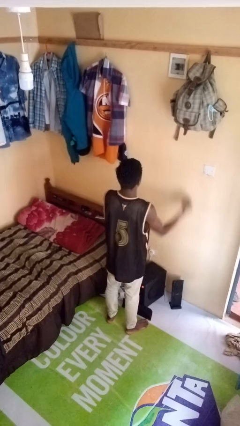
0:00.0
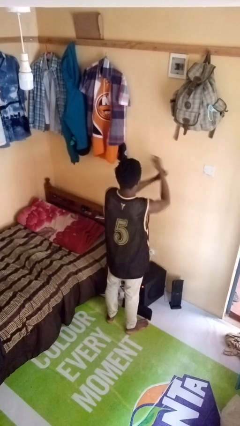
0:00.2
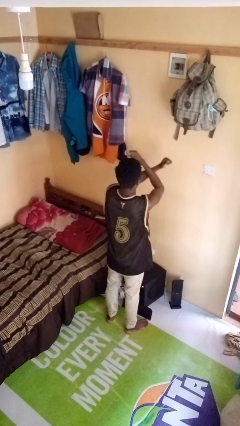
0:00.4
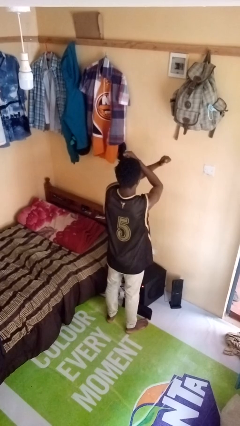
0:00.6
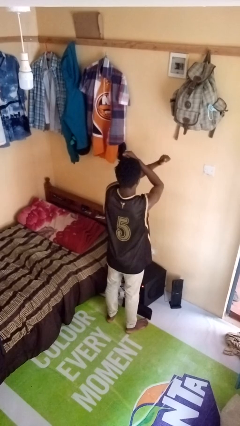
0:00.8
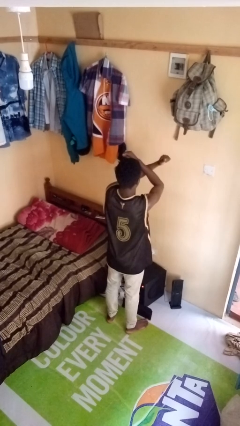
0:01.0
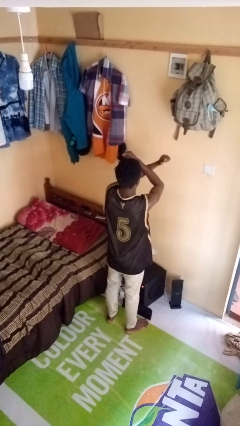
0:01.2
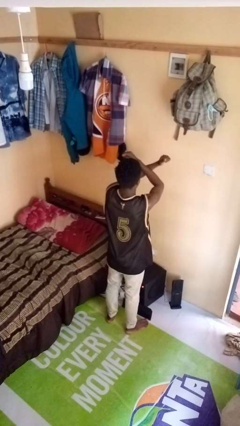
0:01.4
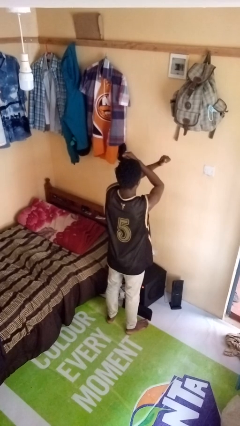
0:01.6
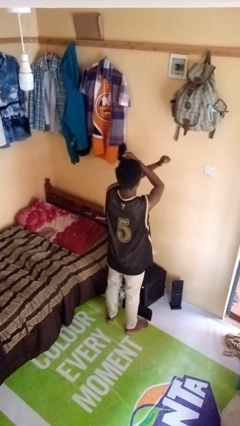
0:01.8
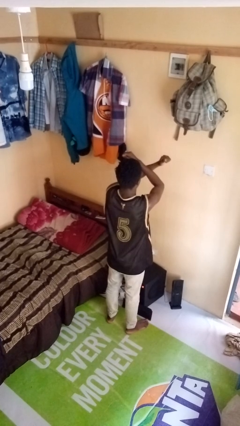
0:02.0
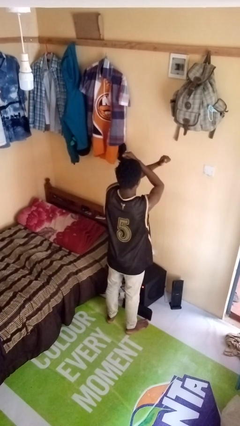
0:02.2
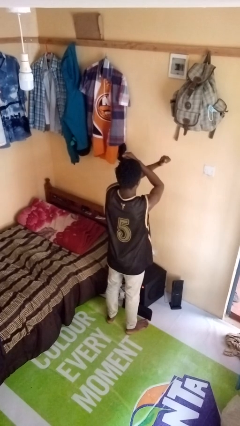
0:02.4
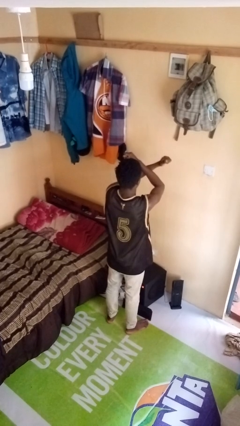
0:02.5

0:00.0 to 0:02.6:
person gestures arms x

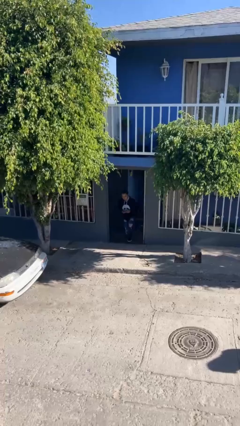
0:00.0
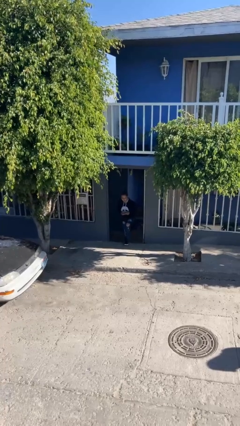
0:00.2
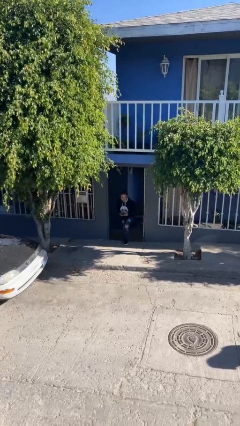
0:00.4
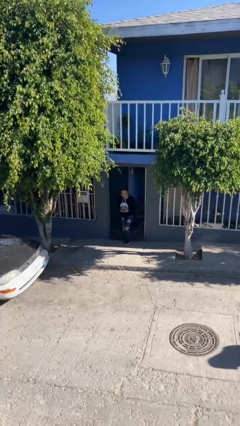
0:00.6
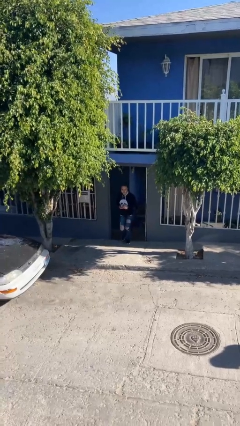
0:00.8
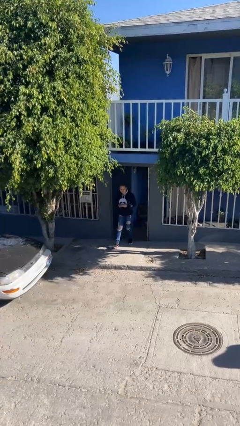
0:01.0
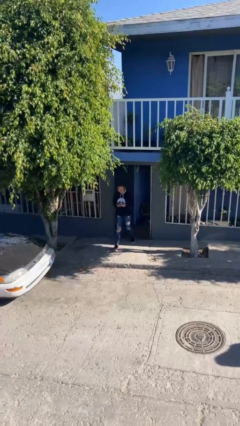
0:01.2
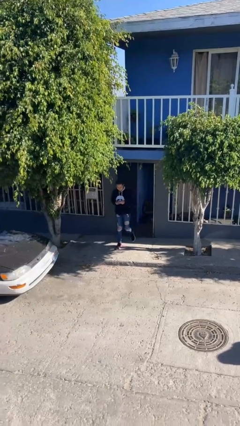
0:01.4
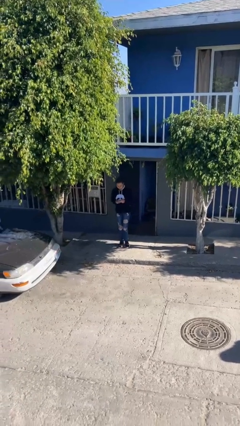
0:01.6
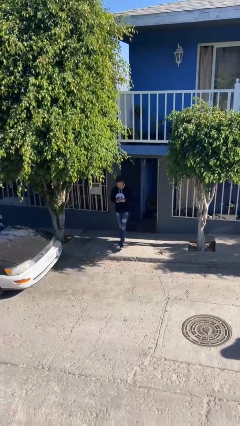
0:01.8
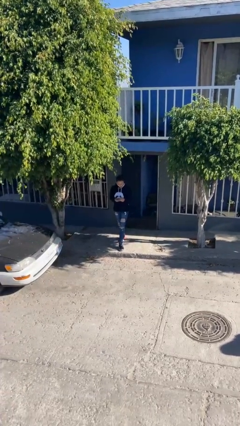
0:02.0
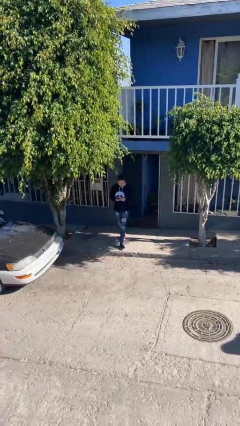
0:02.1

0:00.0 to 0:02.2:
person enters scene through structure

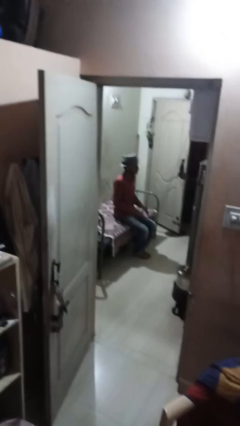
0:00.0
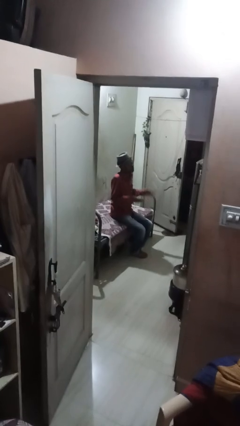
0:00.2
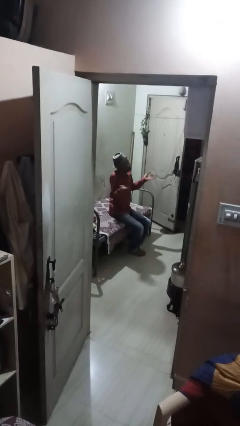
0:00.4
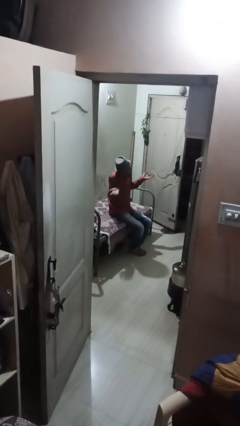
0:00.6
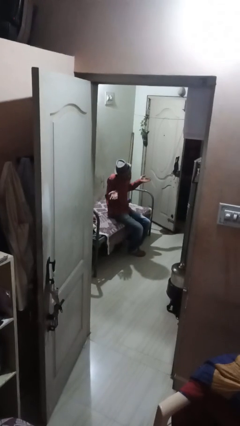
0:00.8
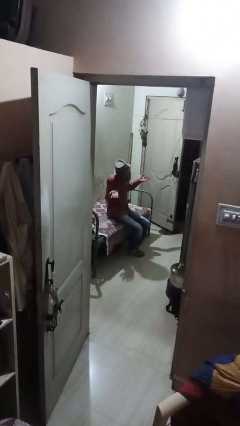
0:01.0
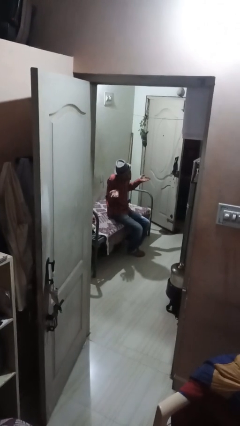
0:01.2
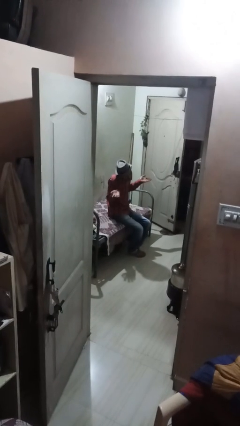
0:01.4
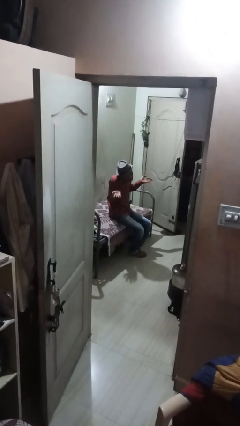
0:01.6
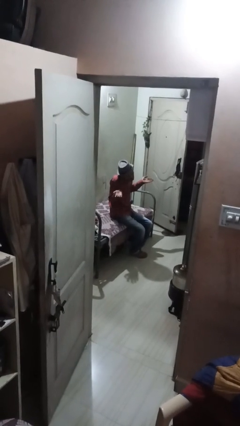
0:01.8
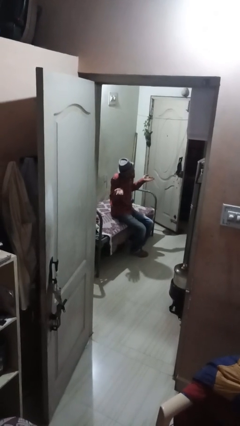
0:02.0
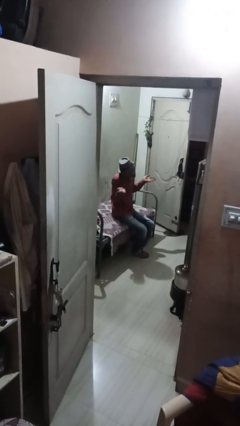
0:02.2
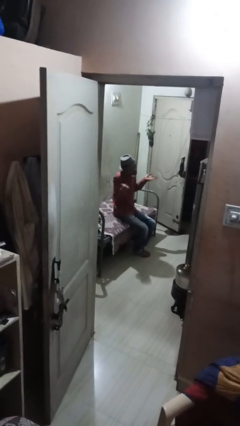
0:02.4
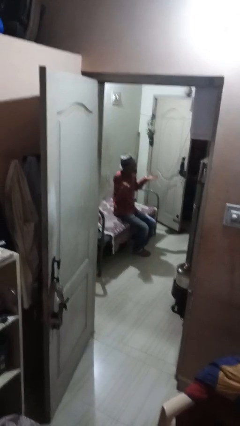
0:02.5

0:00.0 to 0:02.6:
person shrugs

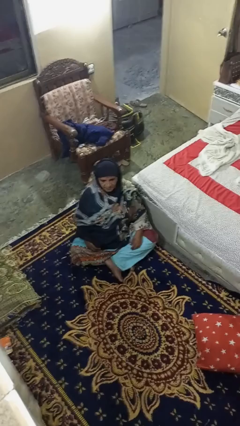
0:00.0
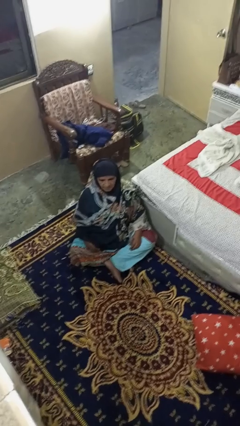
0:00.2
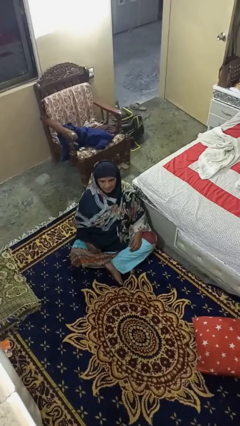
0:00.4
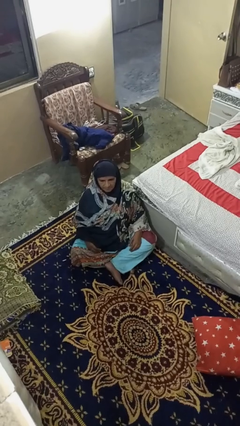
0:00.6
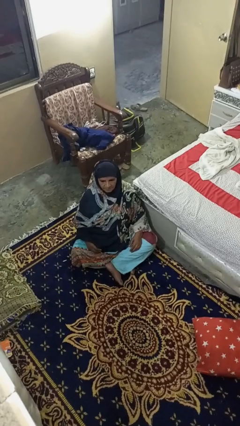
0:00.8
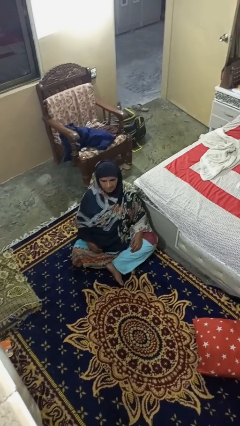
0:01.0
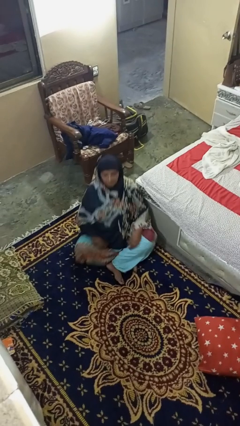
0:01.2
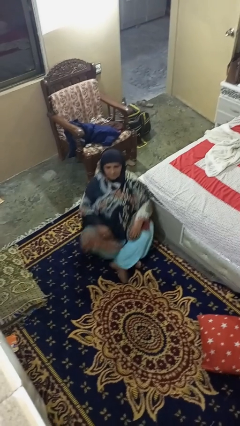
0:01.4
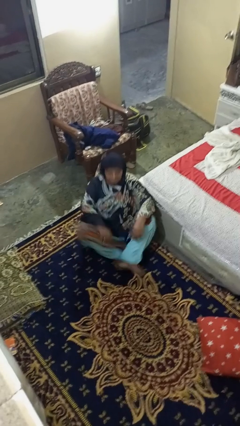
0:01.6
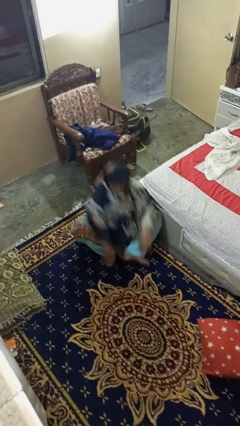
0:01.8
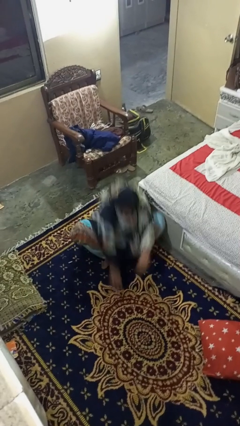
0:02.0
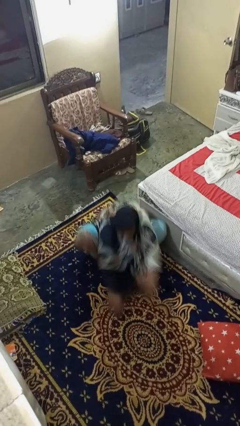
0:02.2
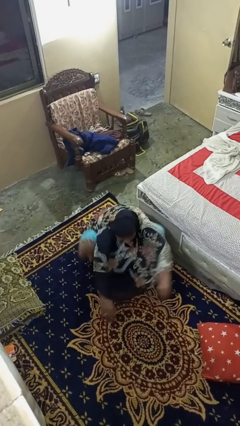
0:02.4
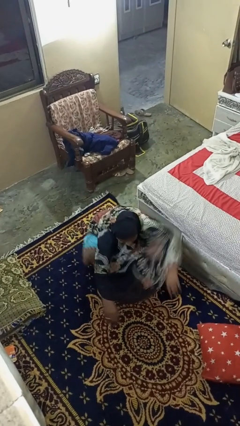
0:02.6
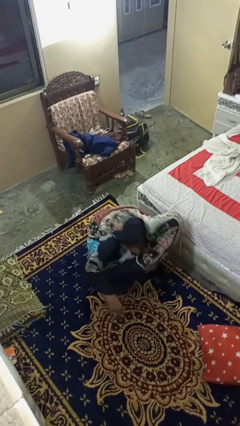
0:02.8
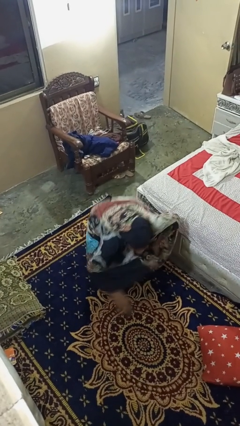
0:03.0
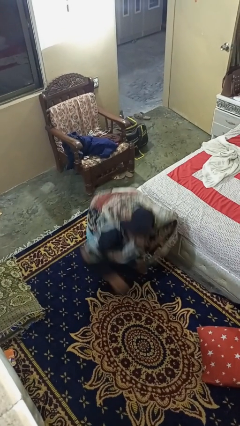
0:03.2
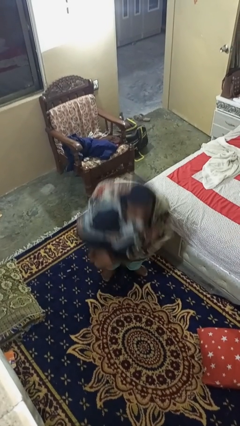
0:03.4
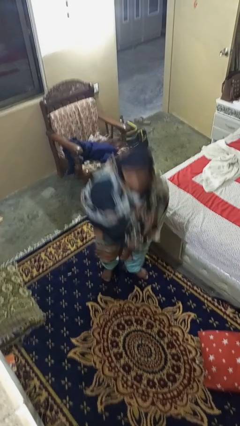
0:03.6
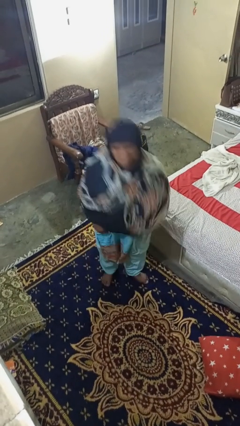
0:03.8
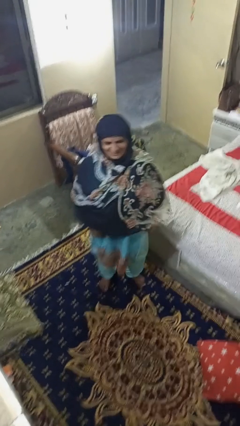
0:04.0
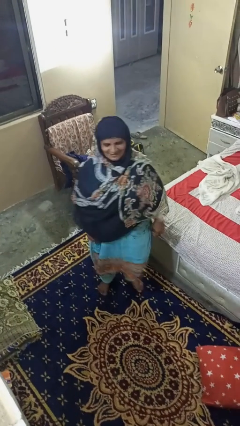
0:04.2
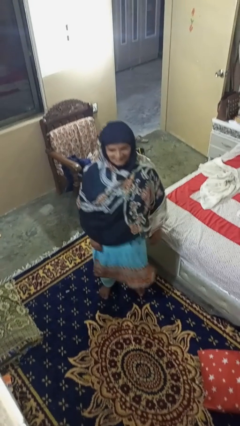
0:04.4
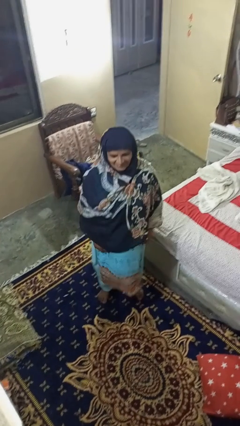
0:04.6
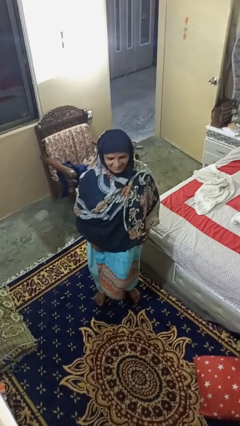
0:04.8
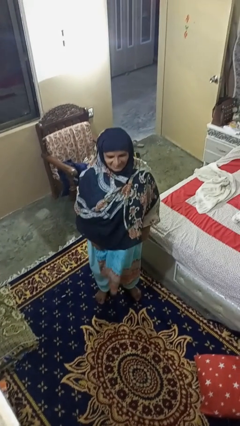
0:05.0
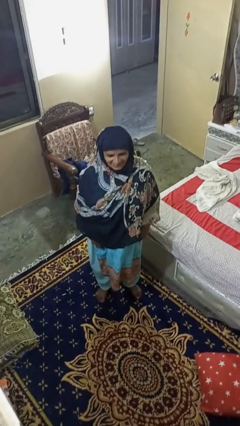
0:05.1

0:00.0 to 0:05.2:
person stands up from floor

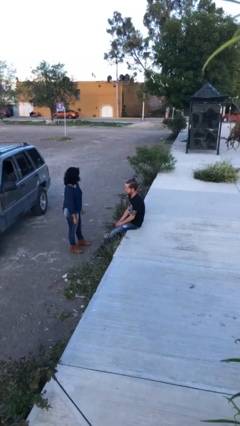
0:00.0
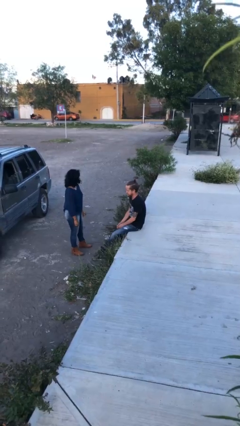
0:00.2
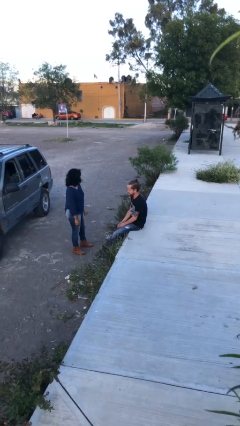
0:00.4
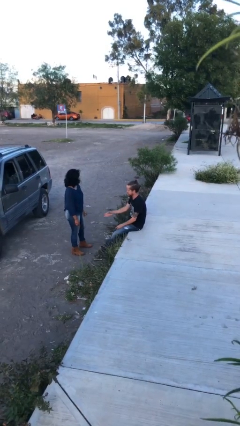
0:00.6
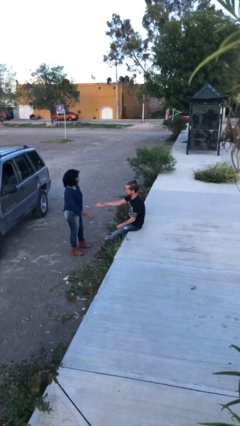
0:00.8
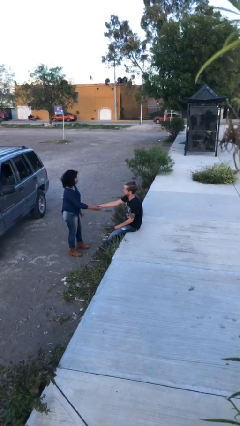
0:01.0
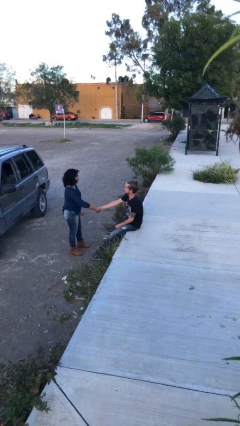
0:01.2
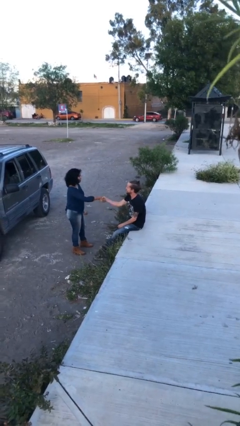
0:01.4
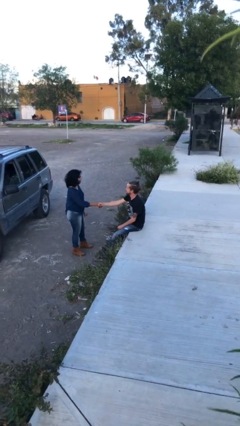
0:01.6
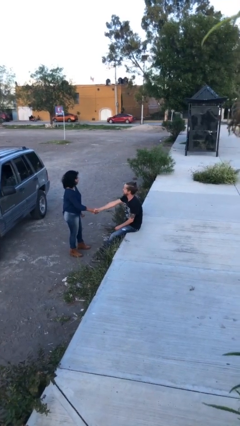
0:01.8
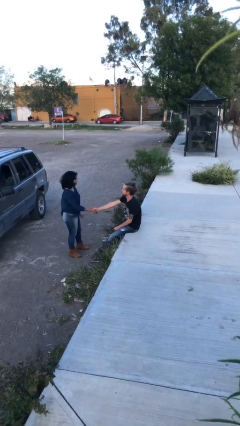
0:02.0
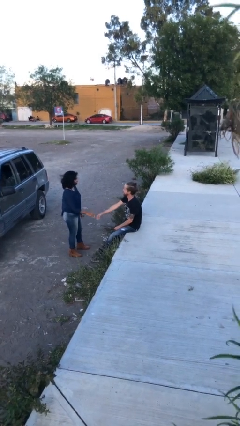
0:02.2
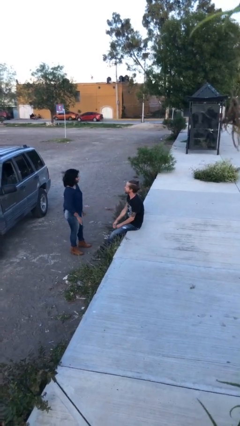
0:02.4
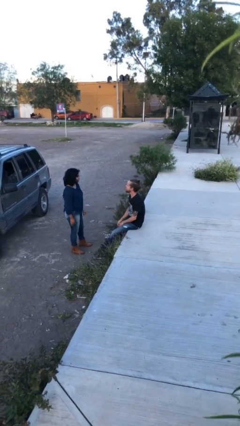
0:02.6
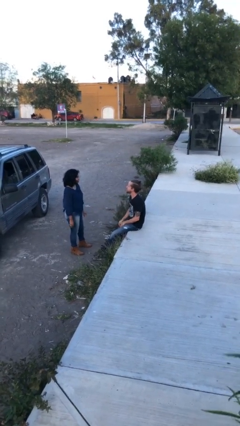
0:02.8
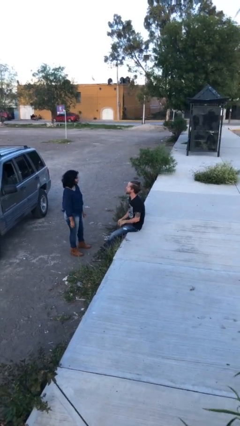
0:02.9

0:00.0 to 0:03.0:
person shakes hand

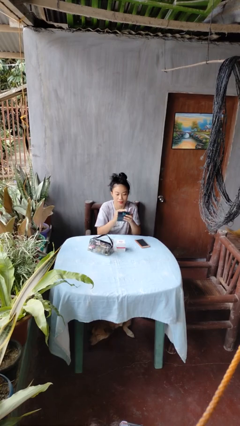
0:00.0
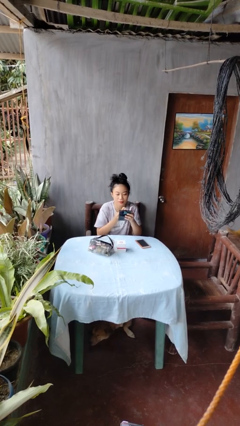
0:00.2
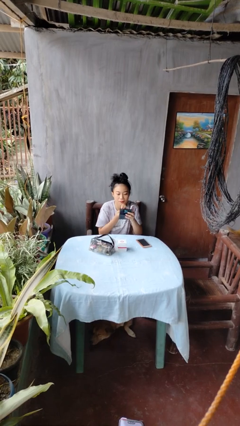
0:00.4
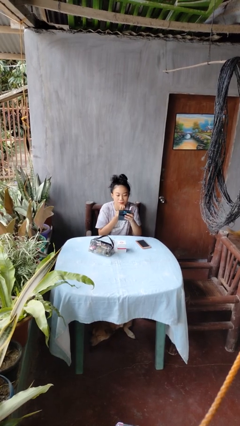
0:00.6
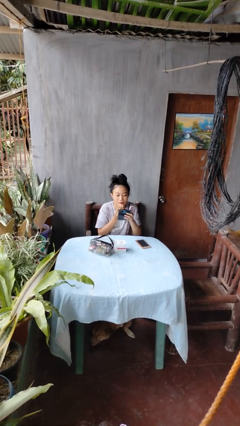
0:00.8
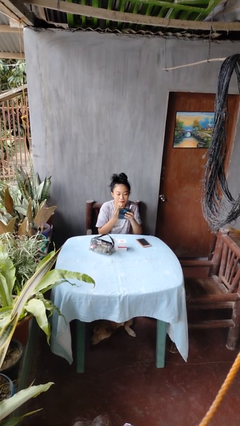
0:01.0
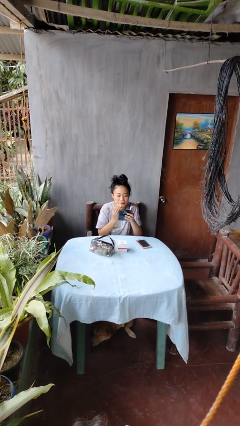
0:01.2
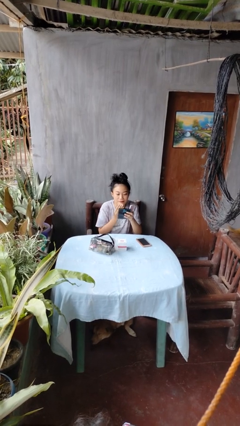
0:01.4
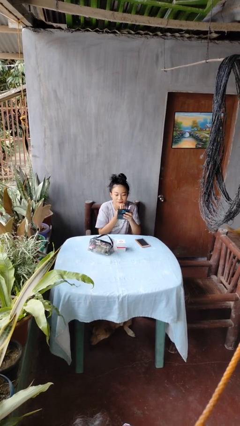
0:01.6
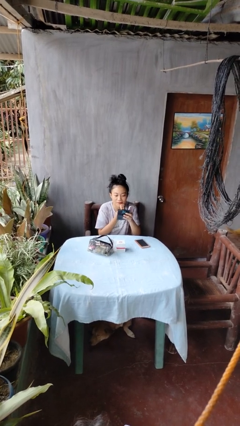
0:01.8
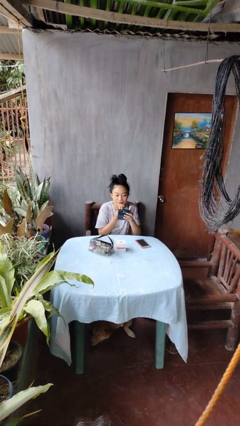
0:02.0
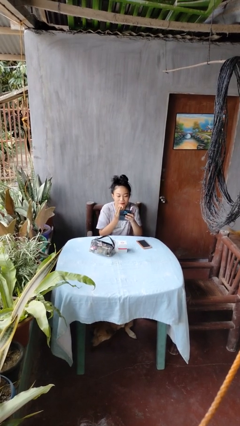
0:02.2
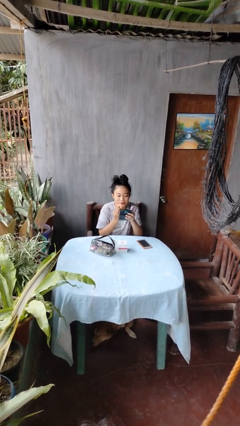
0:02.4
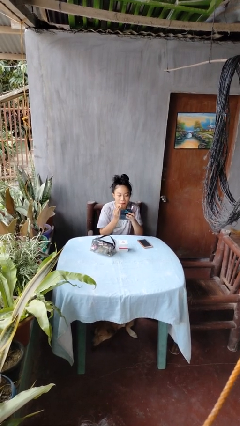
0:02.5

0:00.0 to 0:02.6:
person applies foundation makeup
